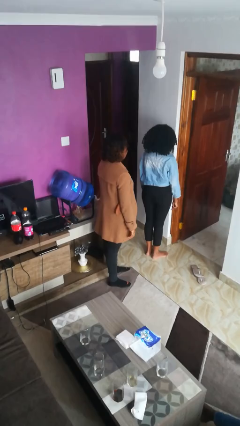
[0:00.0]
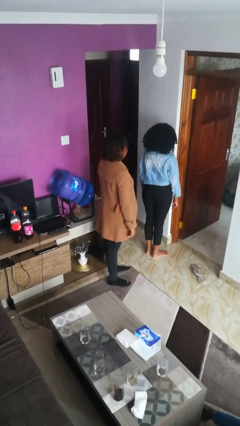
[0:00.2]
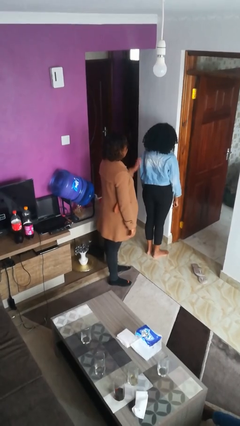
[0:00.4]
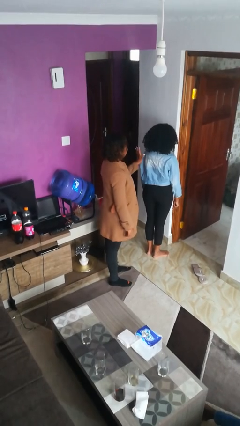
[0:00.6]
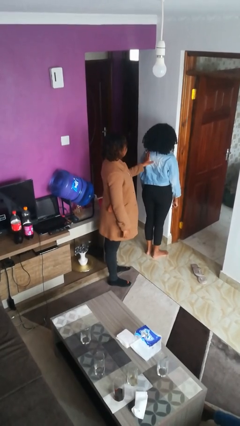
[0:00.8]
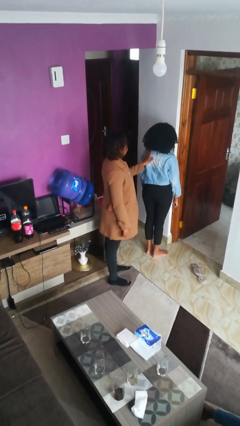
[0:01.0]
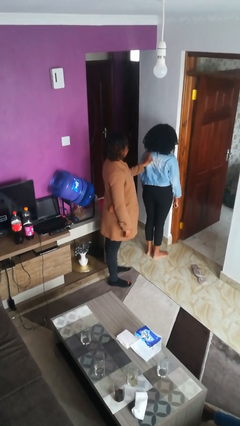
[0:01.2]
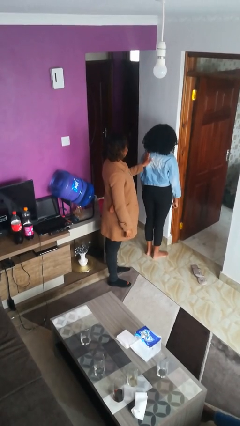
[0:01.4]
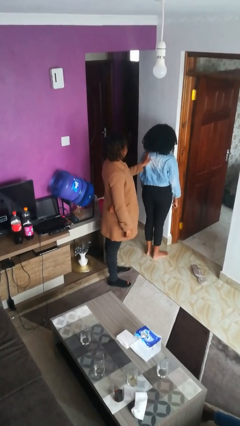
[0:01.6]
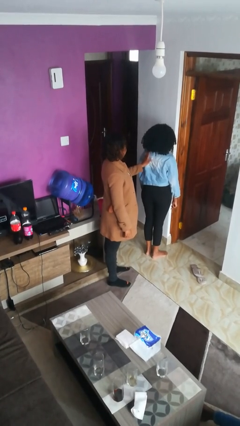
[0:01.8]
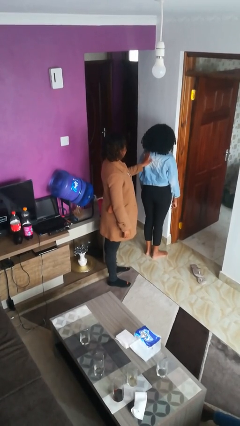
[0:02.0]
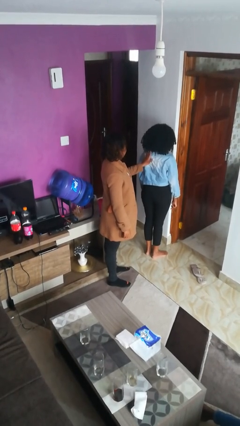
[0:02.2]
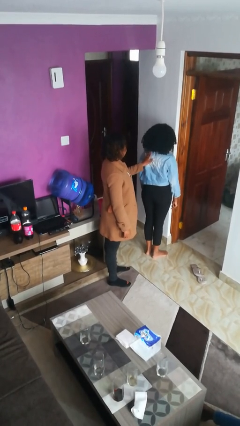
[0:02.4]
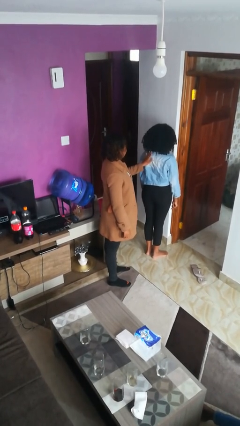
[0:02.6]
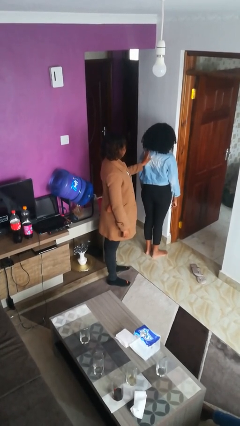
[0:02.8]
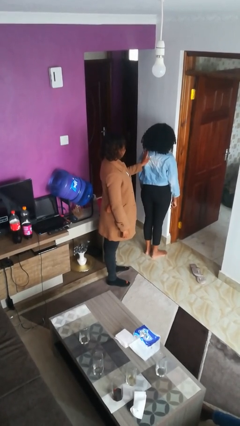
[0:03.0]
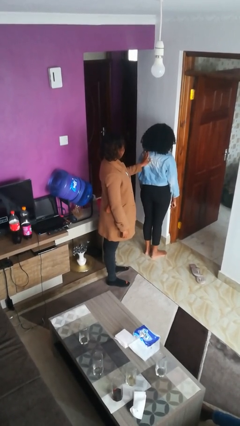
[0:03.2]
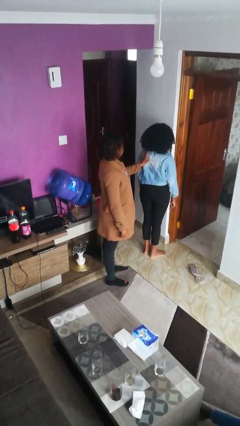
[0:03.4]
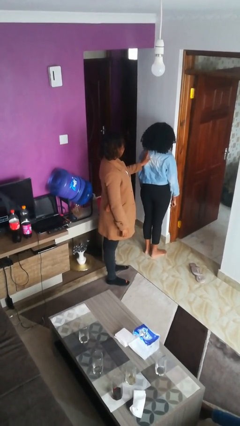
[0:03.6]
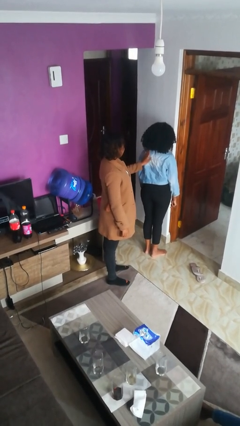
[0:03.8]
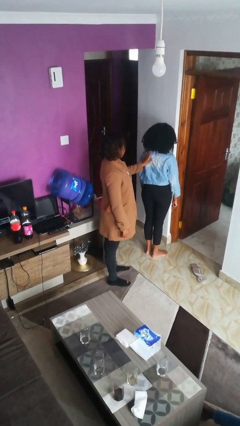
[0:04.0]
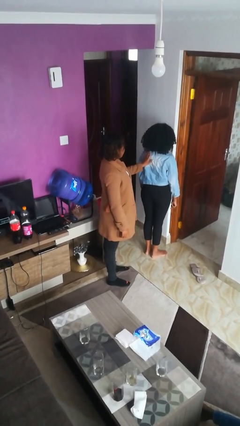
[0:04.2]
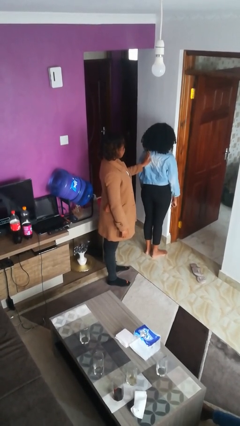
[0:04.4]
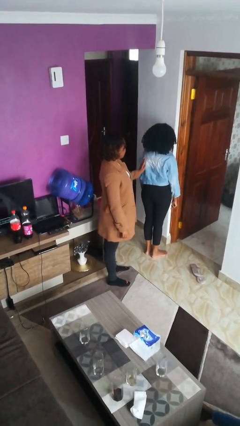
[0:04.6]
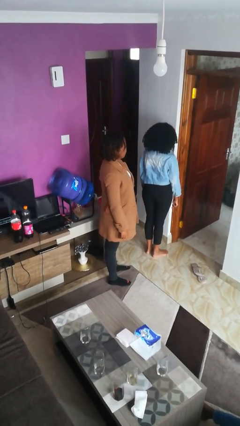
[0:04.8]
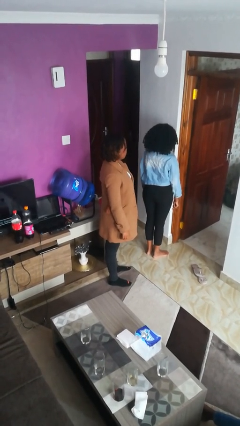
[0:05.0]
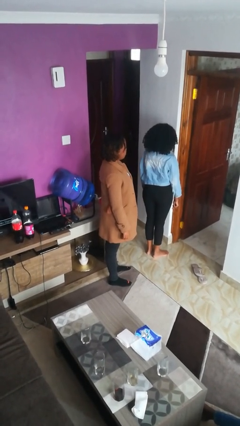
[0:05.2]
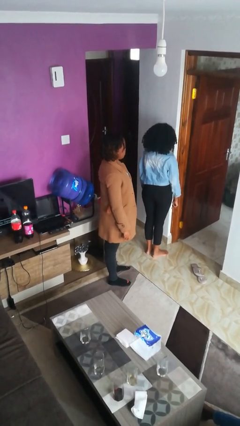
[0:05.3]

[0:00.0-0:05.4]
person touches back of person

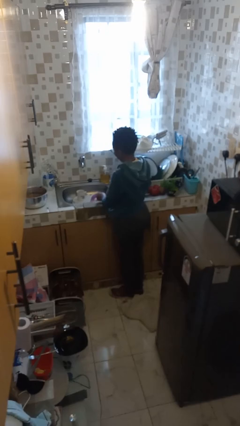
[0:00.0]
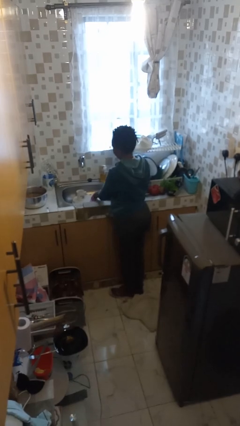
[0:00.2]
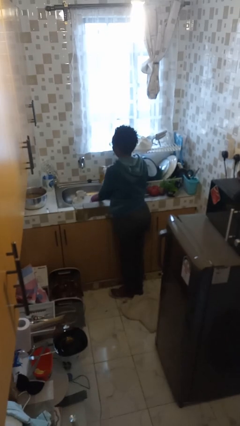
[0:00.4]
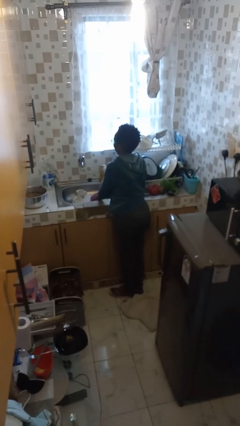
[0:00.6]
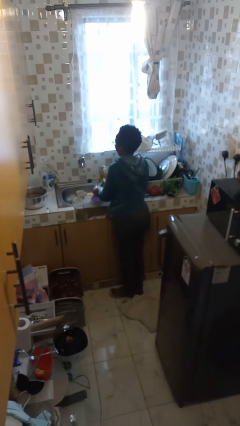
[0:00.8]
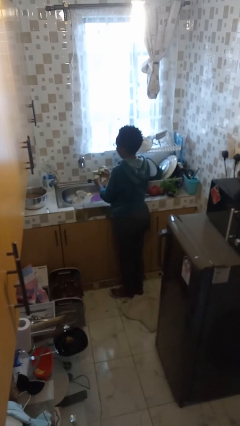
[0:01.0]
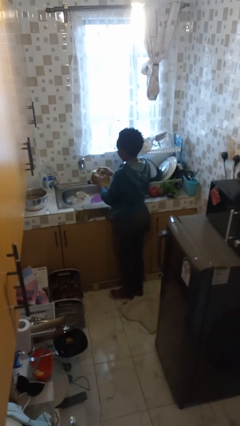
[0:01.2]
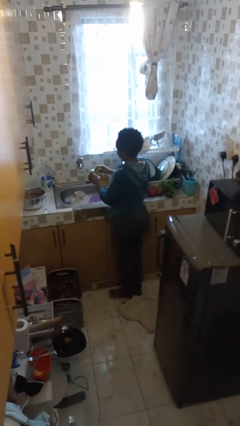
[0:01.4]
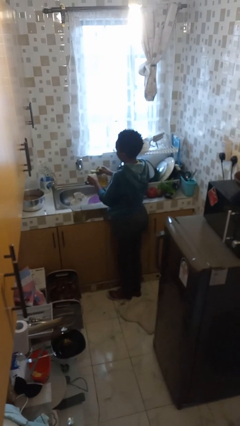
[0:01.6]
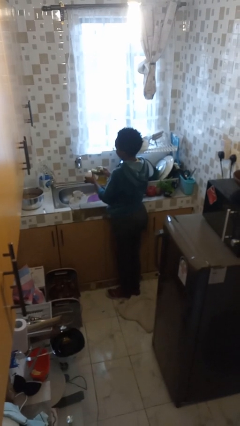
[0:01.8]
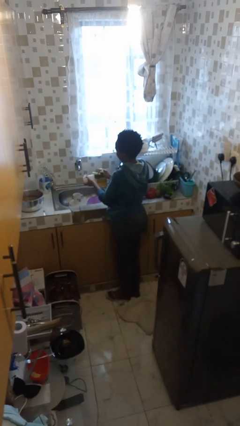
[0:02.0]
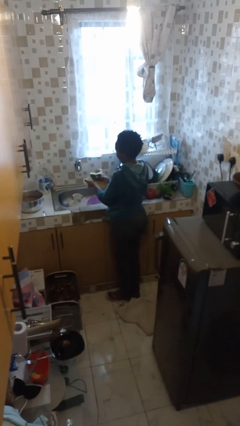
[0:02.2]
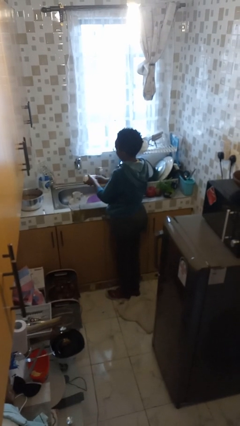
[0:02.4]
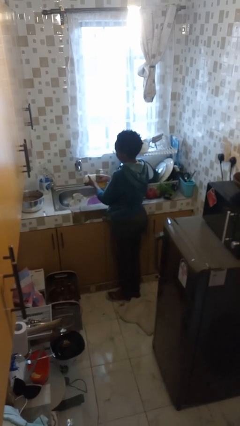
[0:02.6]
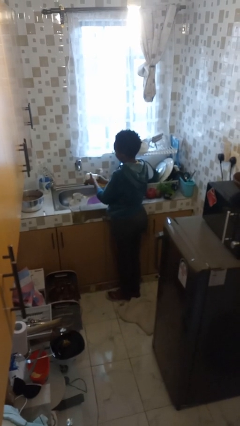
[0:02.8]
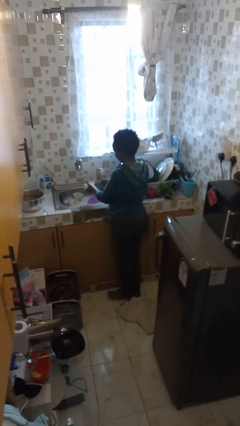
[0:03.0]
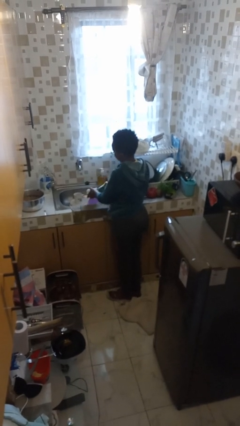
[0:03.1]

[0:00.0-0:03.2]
person washes dish

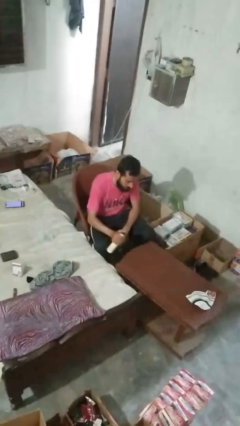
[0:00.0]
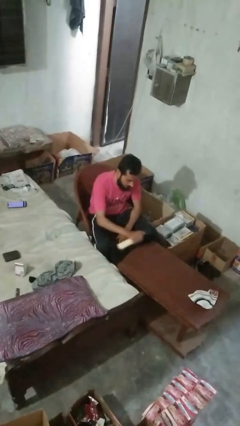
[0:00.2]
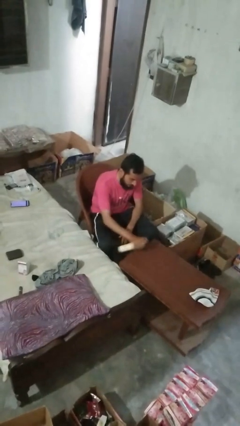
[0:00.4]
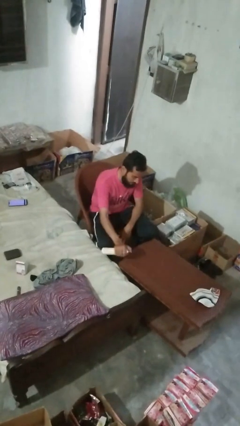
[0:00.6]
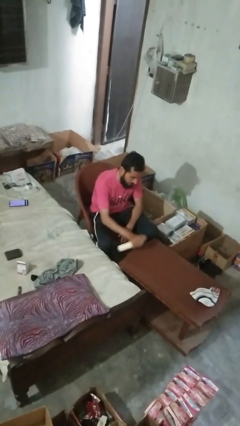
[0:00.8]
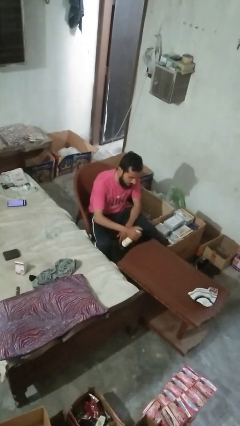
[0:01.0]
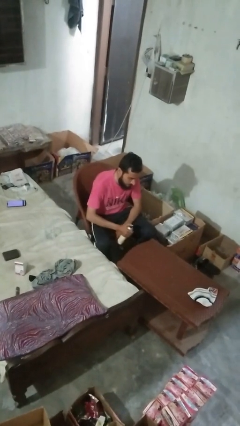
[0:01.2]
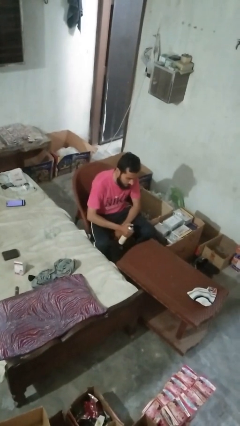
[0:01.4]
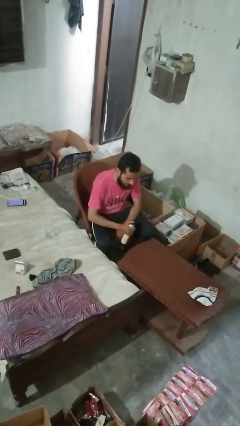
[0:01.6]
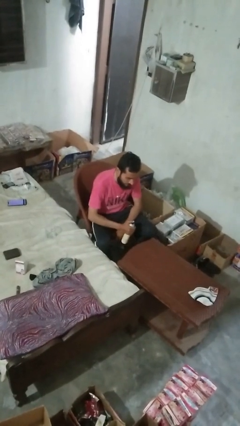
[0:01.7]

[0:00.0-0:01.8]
person sprays from bottle

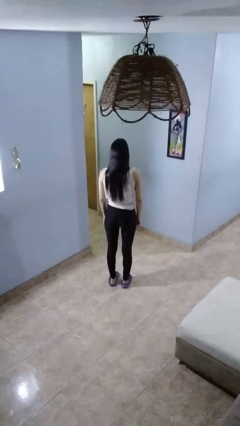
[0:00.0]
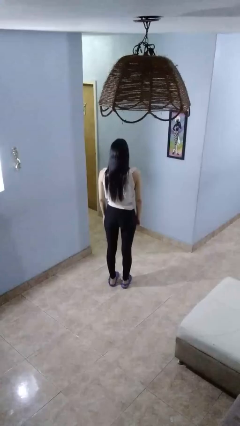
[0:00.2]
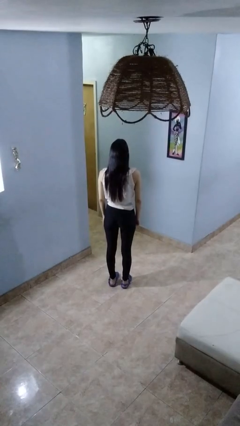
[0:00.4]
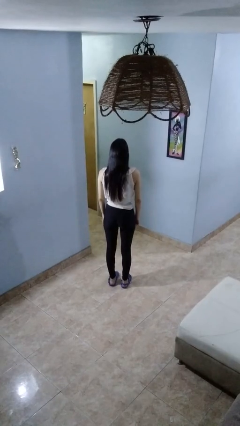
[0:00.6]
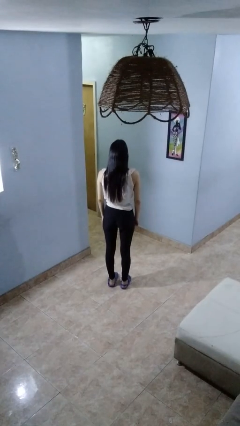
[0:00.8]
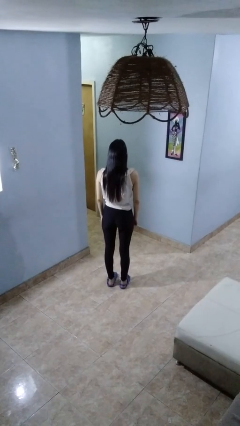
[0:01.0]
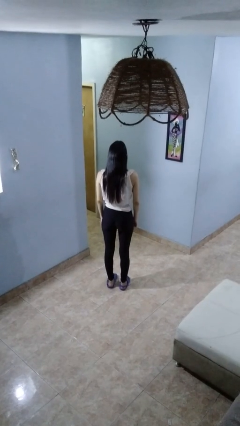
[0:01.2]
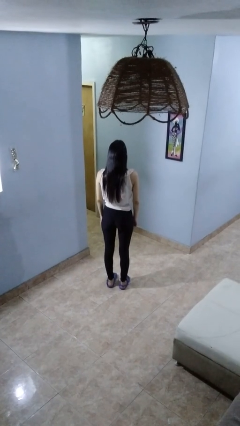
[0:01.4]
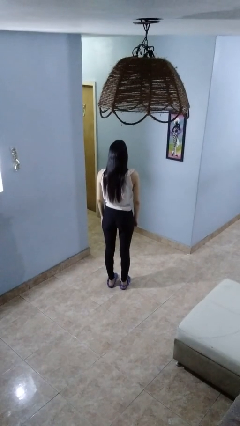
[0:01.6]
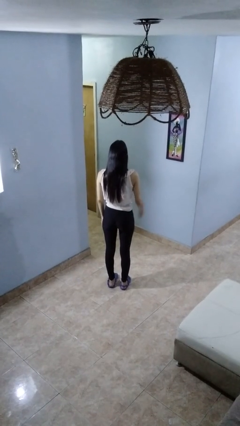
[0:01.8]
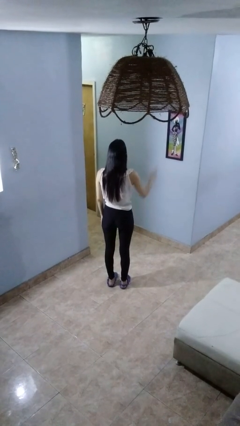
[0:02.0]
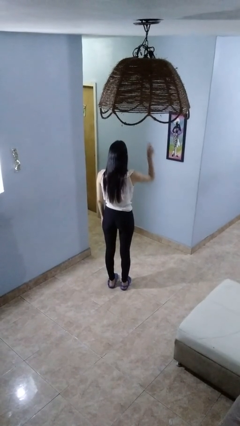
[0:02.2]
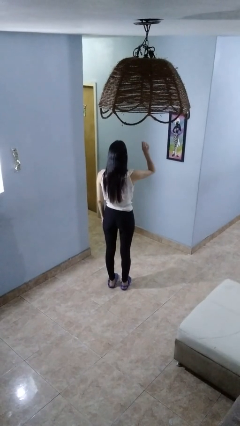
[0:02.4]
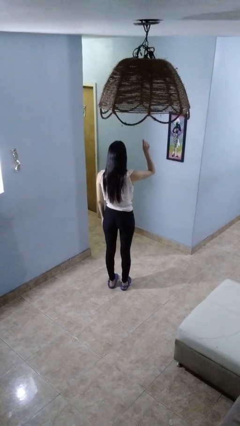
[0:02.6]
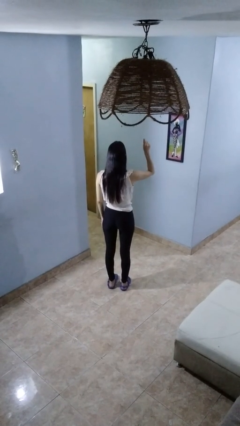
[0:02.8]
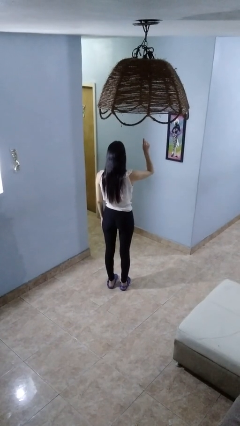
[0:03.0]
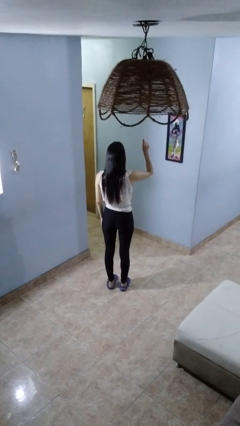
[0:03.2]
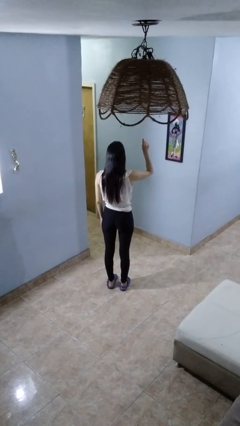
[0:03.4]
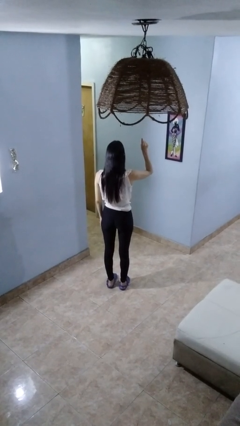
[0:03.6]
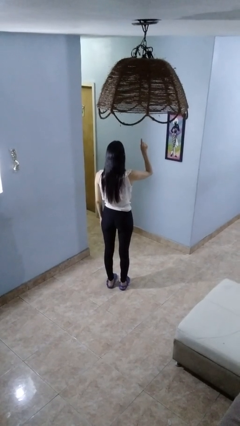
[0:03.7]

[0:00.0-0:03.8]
person gestures number one

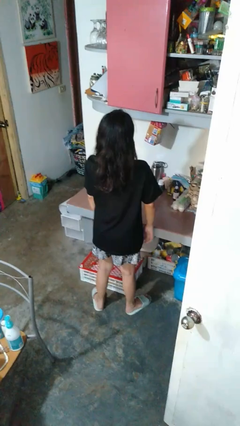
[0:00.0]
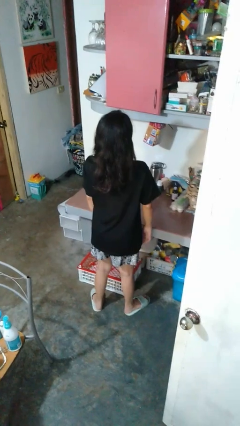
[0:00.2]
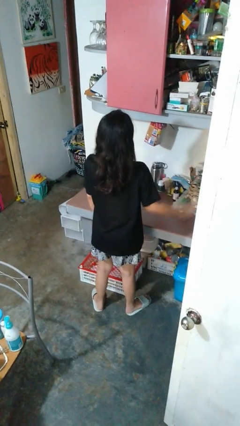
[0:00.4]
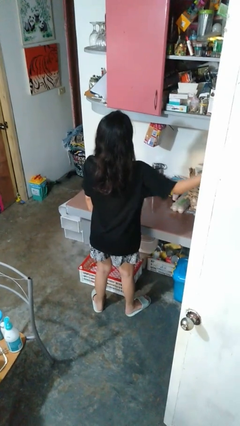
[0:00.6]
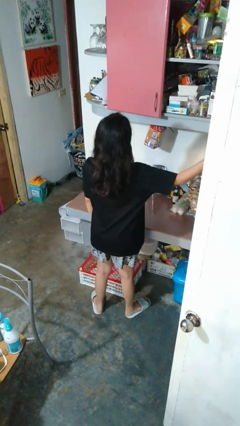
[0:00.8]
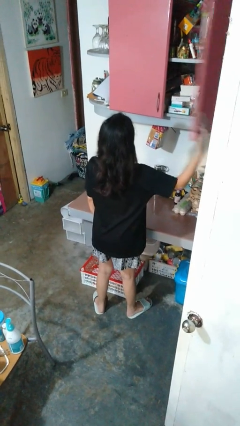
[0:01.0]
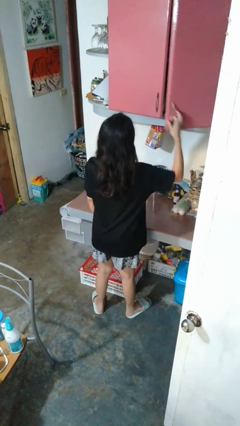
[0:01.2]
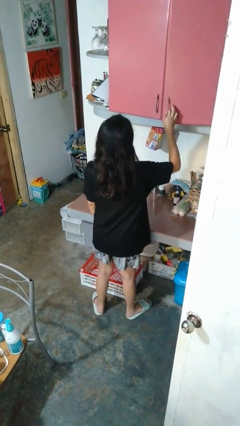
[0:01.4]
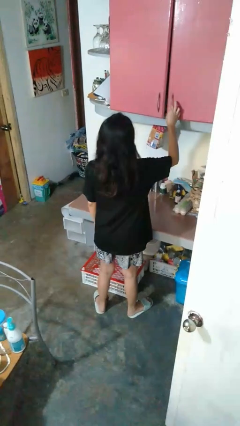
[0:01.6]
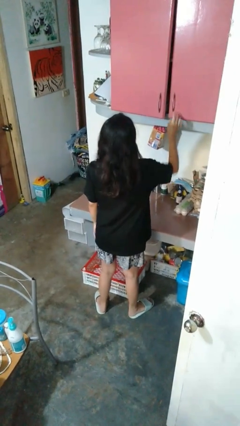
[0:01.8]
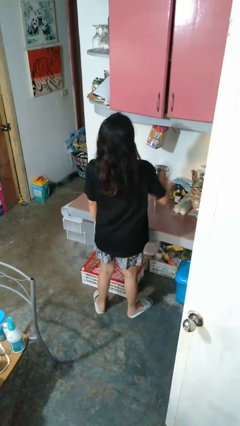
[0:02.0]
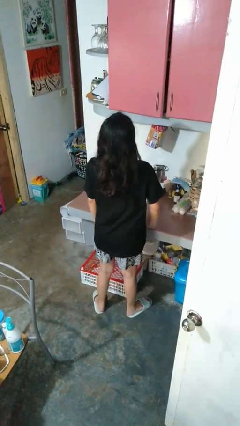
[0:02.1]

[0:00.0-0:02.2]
person closes cabinet

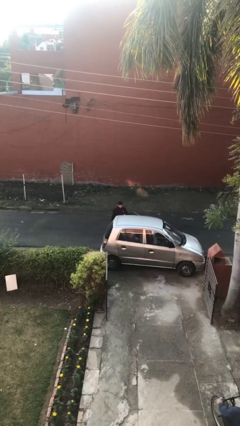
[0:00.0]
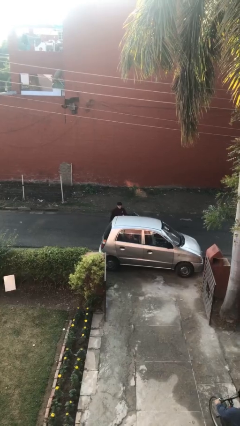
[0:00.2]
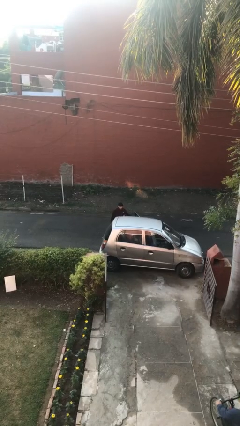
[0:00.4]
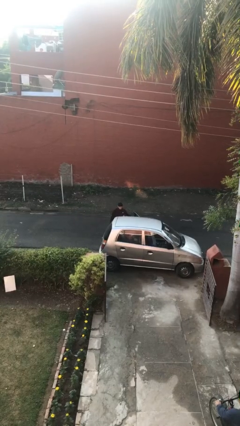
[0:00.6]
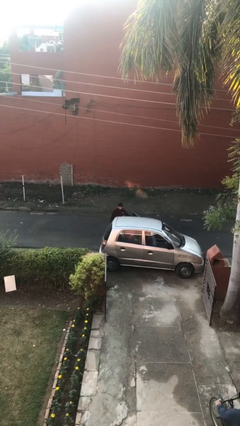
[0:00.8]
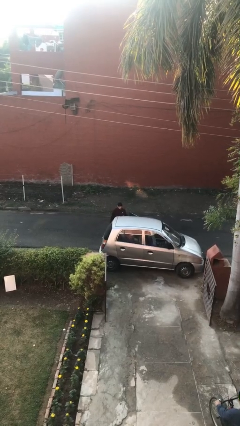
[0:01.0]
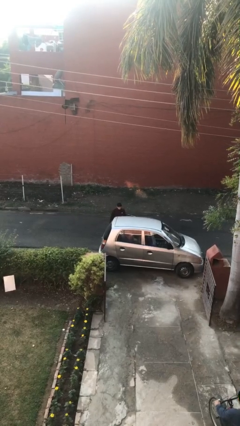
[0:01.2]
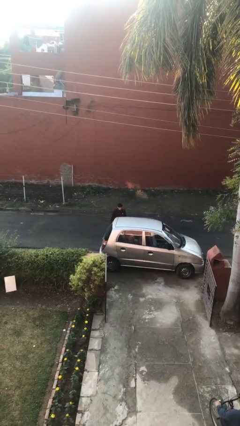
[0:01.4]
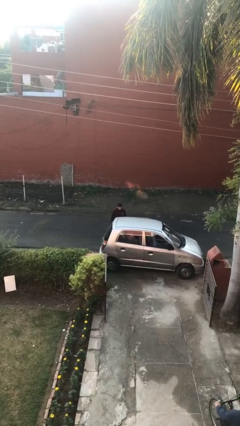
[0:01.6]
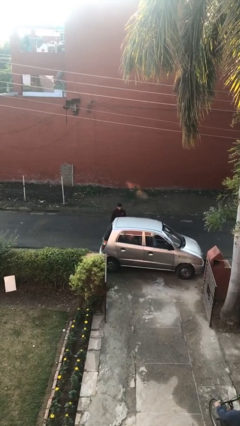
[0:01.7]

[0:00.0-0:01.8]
person closes car door
